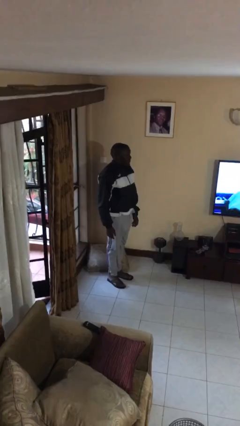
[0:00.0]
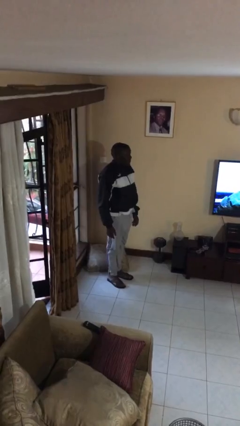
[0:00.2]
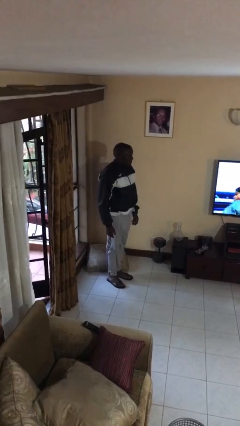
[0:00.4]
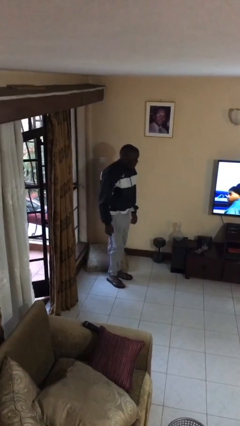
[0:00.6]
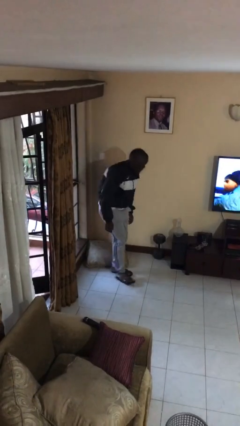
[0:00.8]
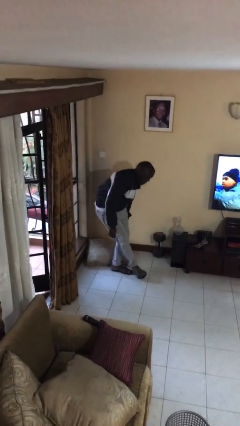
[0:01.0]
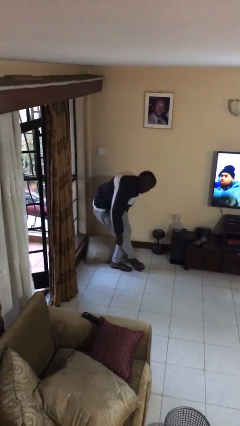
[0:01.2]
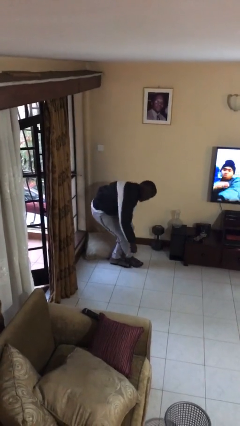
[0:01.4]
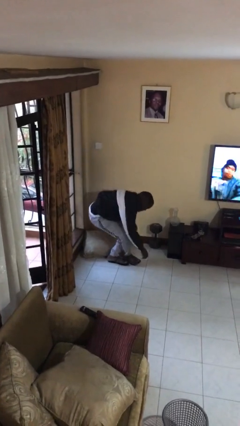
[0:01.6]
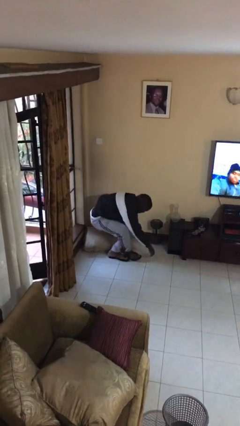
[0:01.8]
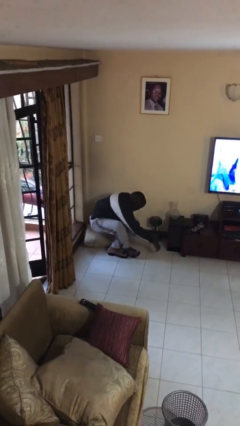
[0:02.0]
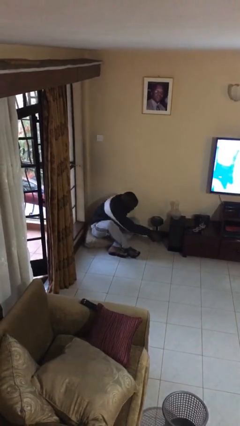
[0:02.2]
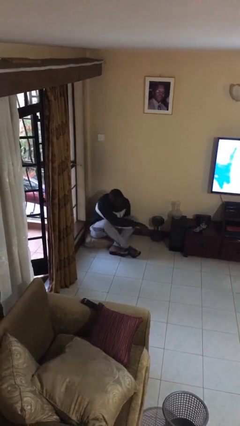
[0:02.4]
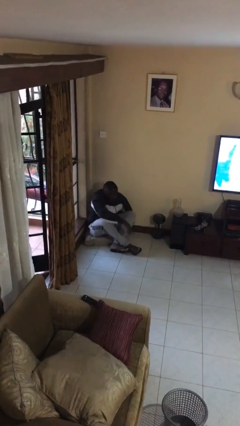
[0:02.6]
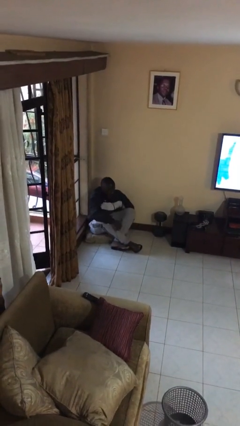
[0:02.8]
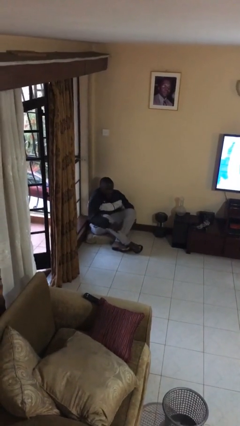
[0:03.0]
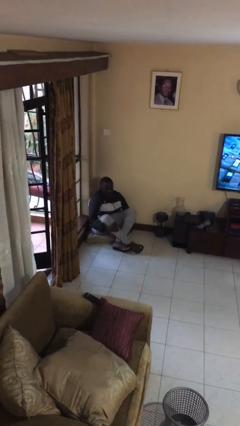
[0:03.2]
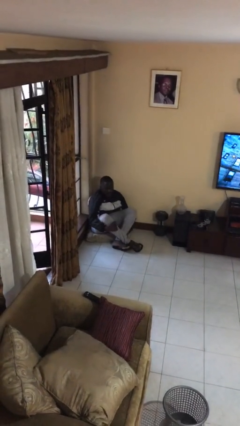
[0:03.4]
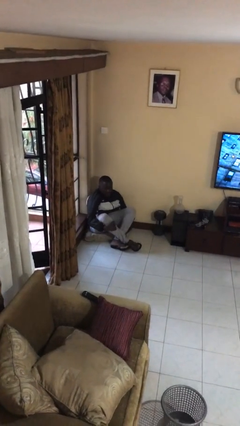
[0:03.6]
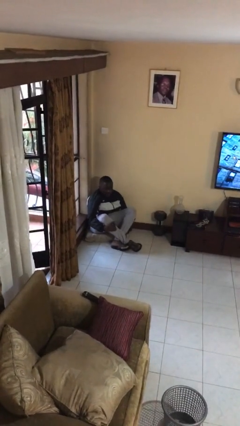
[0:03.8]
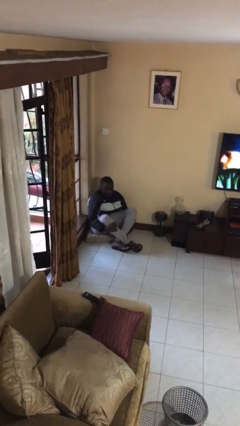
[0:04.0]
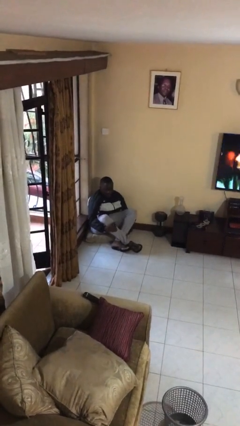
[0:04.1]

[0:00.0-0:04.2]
person sits crisscross

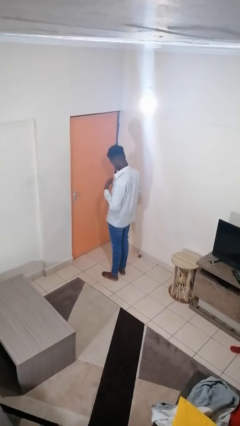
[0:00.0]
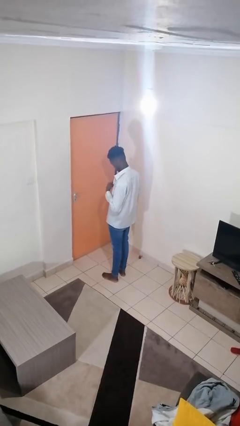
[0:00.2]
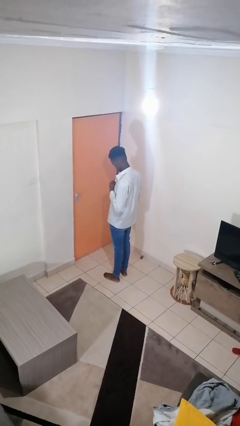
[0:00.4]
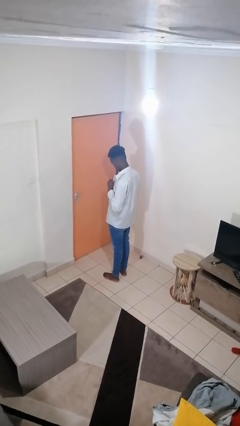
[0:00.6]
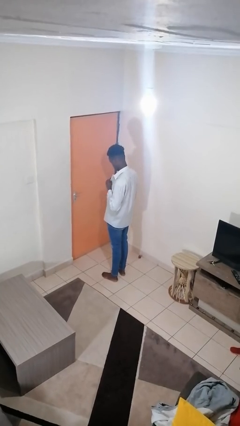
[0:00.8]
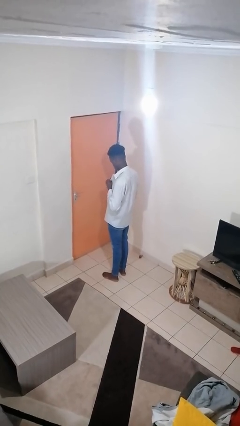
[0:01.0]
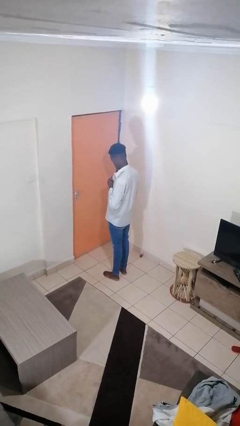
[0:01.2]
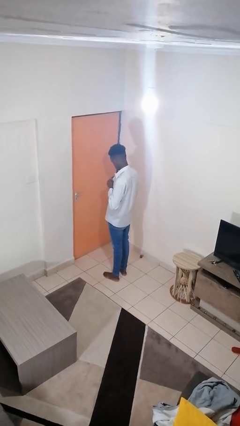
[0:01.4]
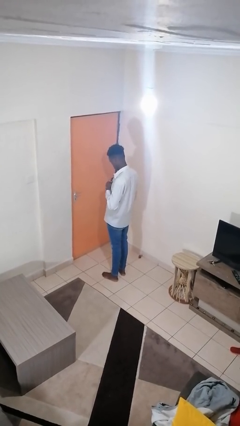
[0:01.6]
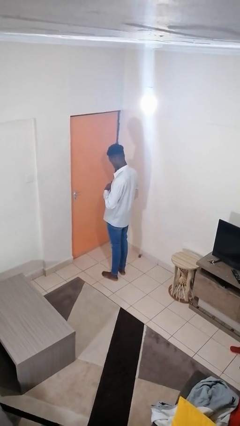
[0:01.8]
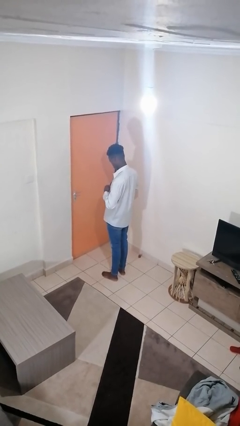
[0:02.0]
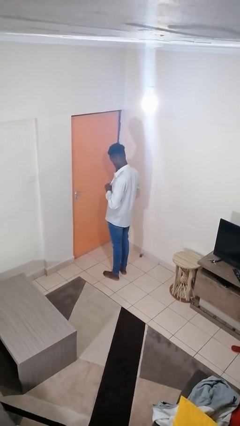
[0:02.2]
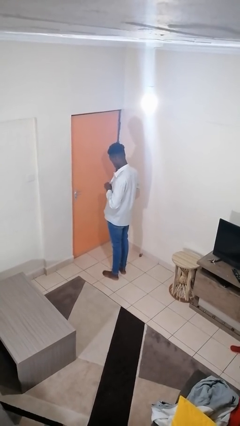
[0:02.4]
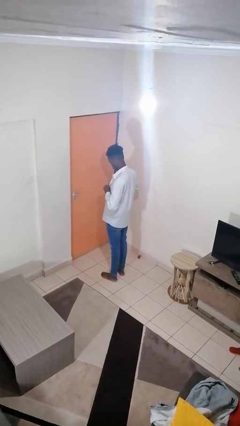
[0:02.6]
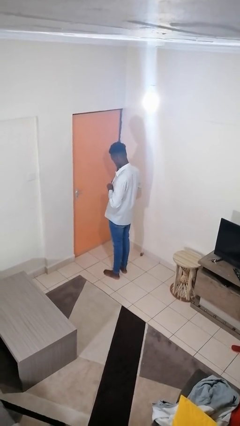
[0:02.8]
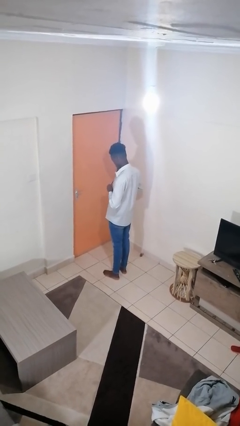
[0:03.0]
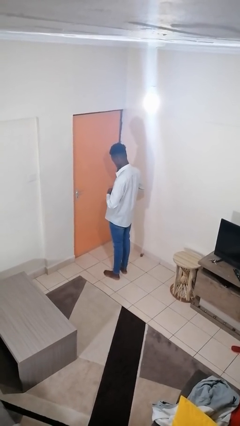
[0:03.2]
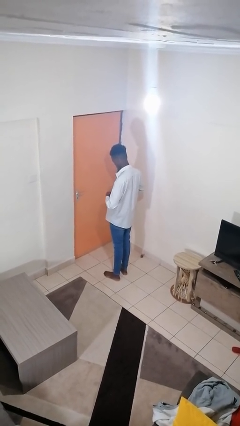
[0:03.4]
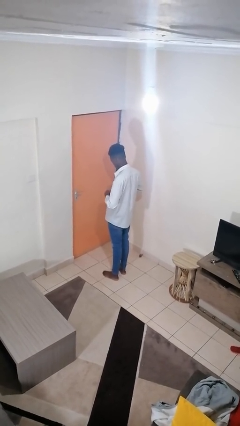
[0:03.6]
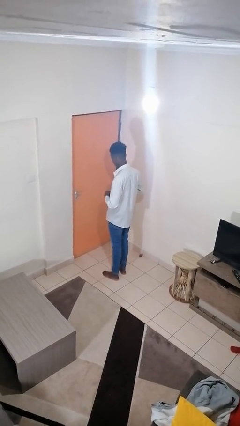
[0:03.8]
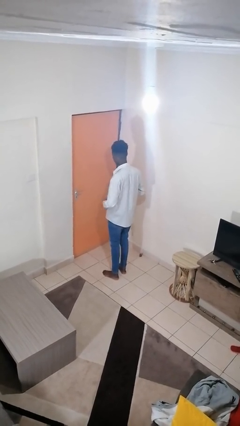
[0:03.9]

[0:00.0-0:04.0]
person buttons shirt

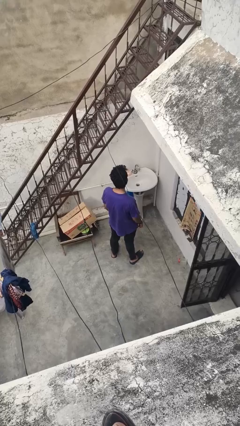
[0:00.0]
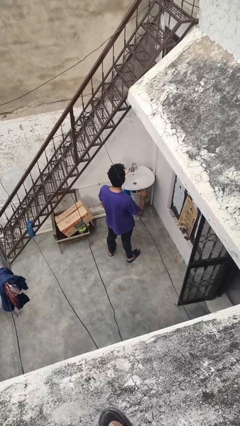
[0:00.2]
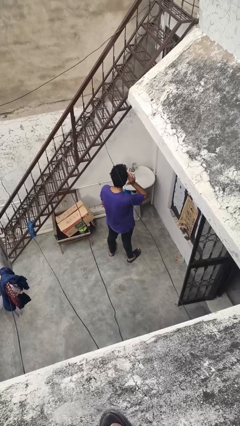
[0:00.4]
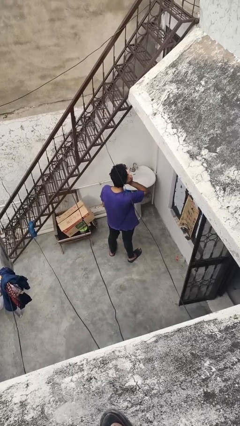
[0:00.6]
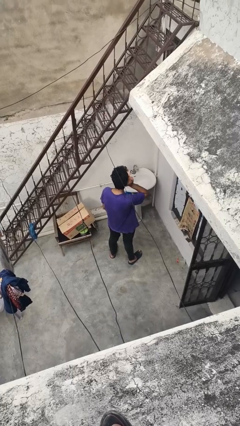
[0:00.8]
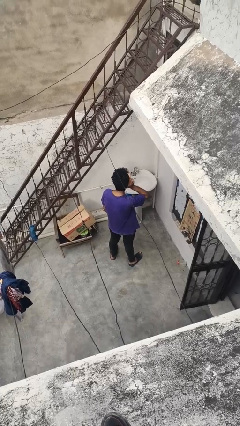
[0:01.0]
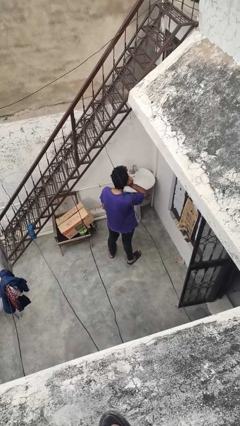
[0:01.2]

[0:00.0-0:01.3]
person gestures listen closely

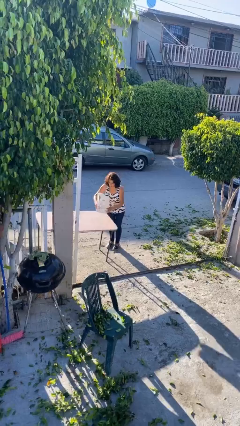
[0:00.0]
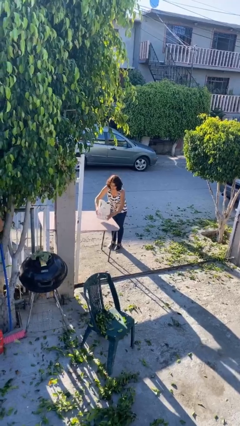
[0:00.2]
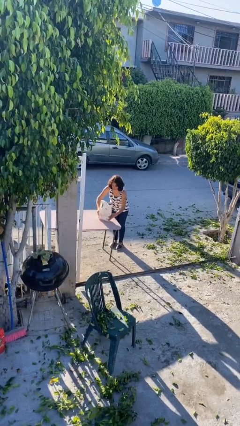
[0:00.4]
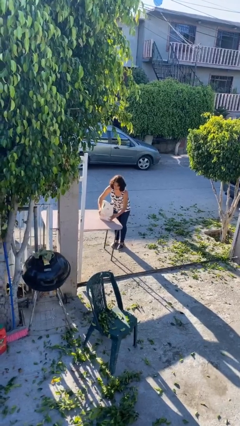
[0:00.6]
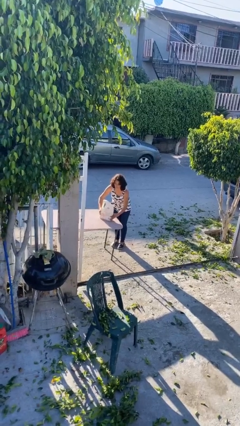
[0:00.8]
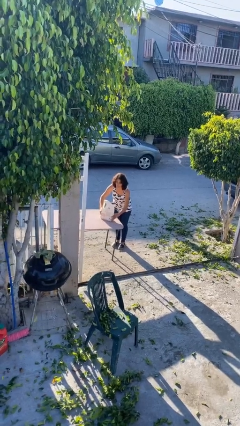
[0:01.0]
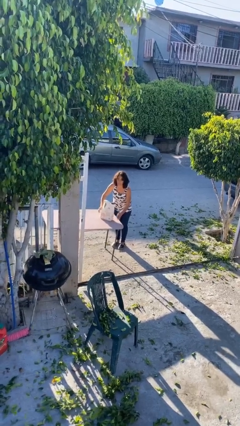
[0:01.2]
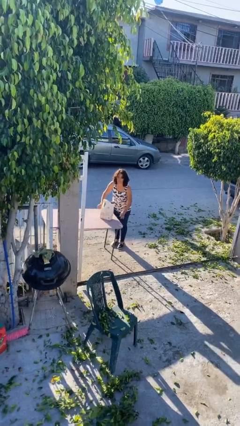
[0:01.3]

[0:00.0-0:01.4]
person puts down object on table

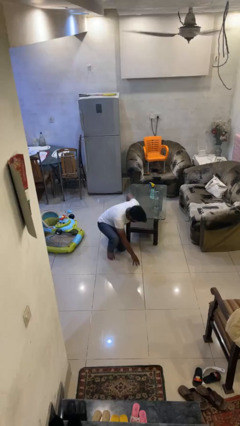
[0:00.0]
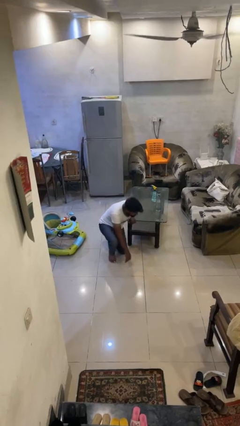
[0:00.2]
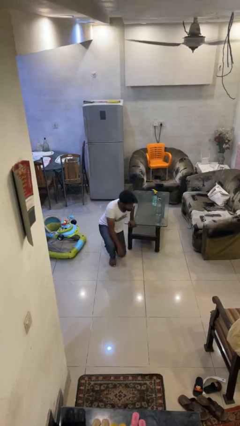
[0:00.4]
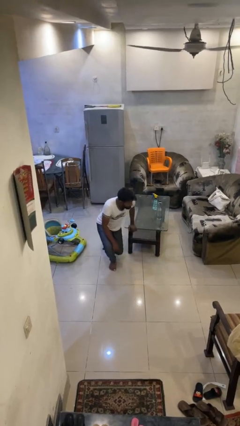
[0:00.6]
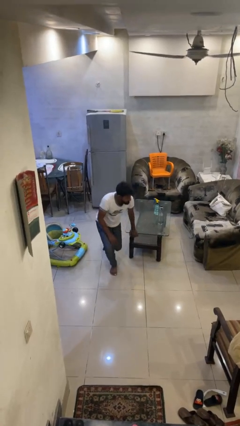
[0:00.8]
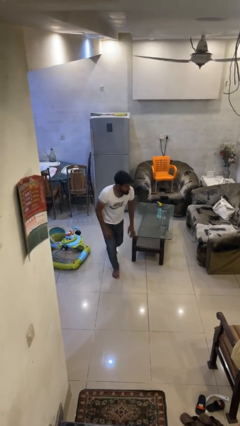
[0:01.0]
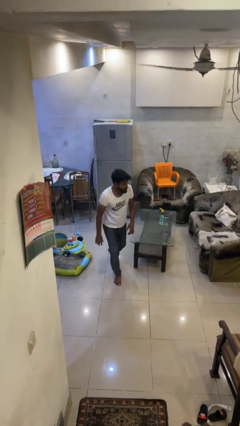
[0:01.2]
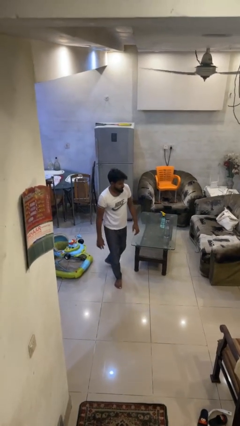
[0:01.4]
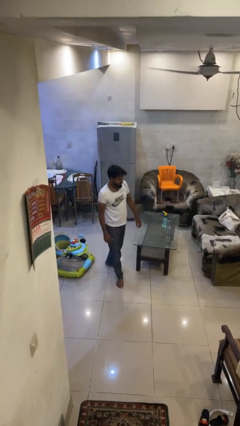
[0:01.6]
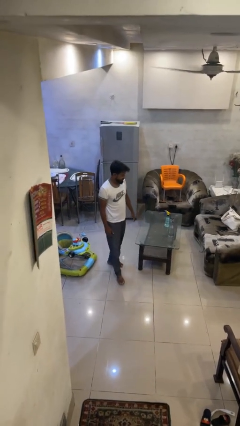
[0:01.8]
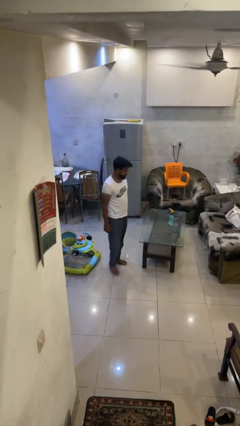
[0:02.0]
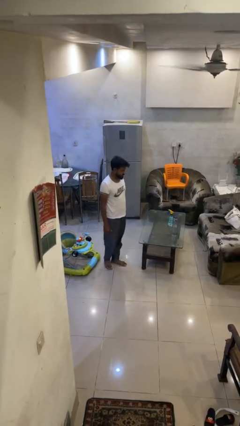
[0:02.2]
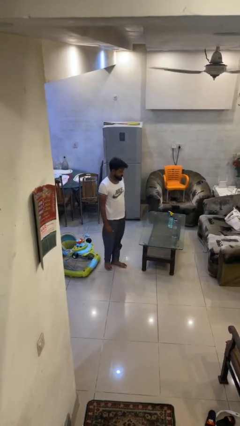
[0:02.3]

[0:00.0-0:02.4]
person stands up from floor

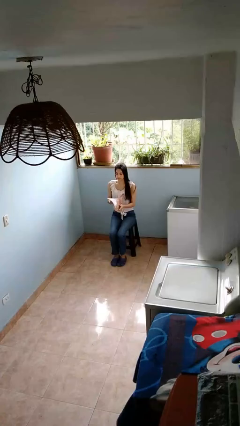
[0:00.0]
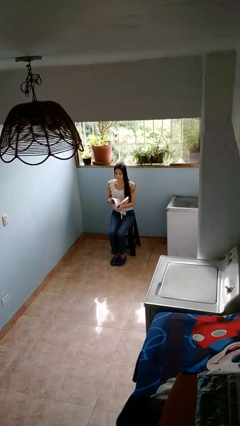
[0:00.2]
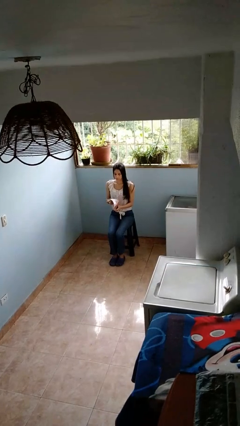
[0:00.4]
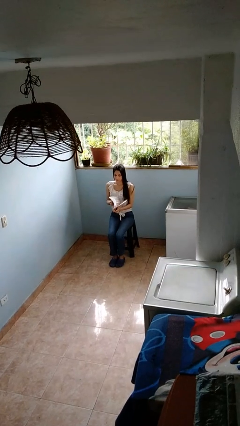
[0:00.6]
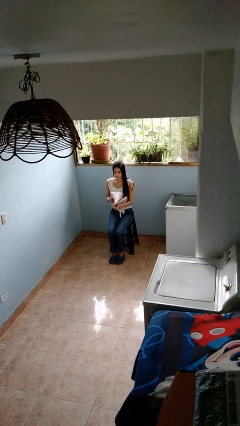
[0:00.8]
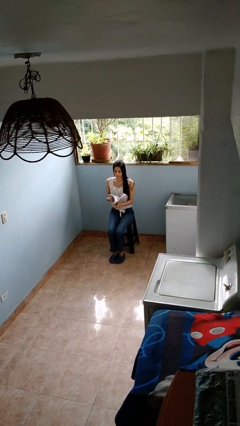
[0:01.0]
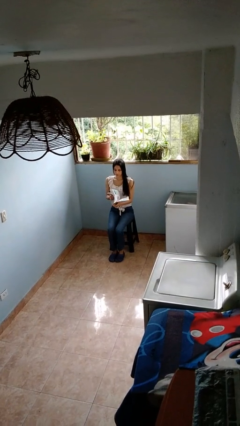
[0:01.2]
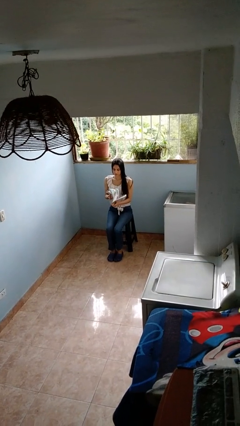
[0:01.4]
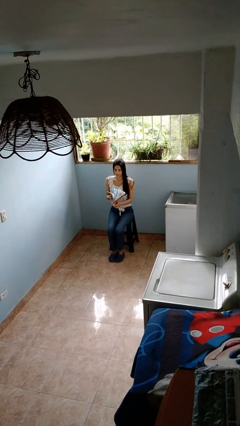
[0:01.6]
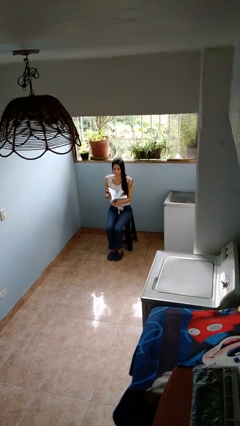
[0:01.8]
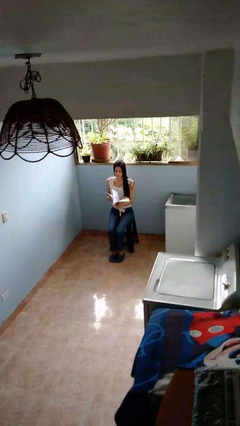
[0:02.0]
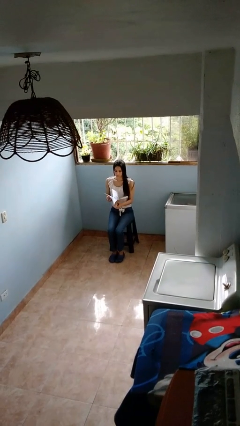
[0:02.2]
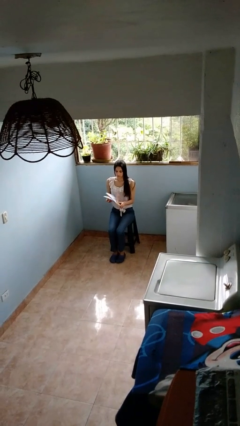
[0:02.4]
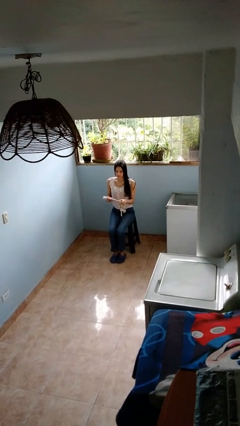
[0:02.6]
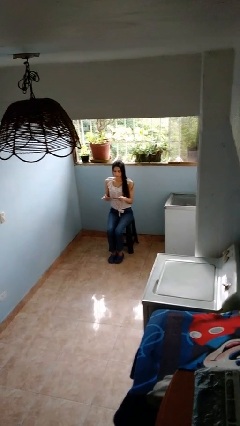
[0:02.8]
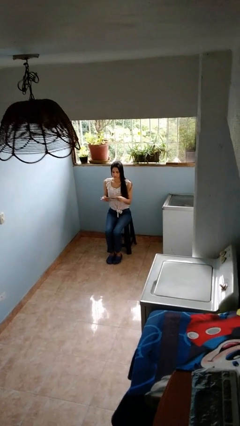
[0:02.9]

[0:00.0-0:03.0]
person reads magazine

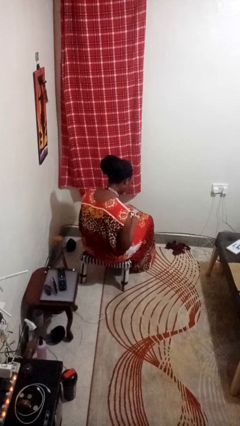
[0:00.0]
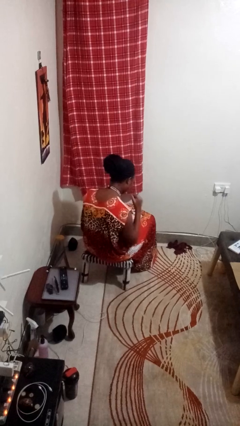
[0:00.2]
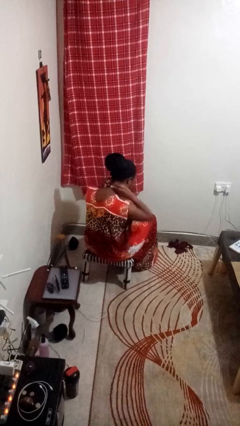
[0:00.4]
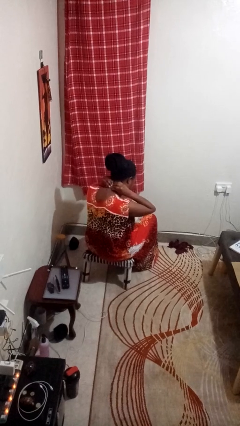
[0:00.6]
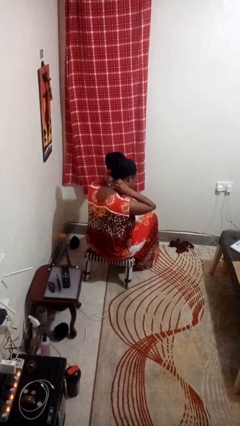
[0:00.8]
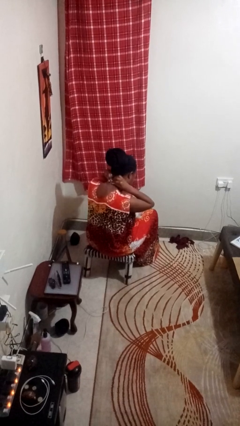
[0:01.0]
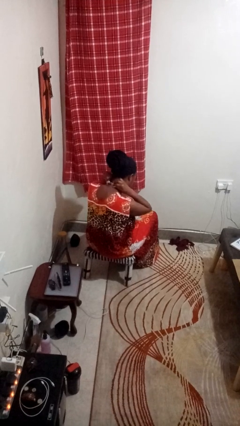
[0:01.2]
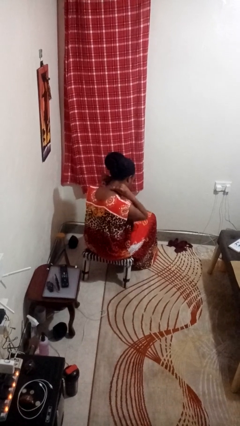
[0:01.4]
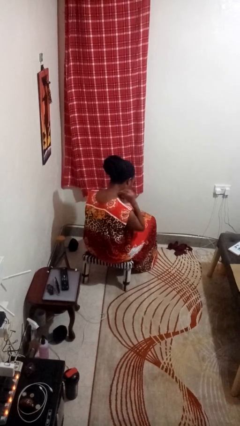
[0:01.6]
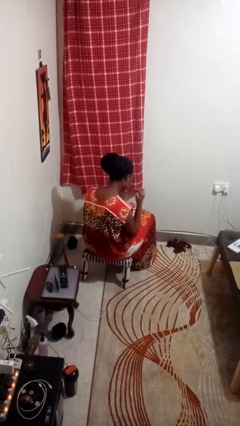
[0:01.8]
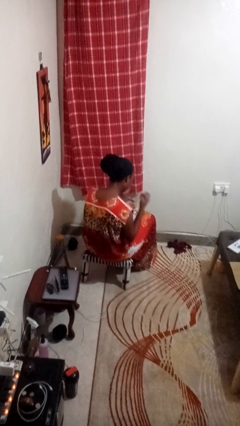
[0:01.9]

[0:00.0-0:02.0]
person takes off necklace
